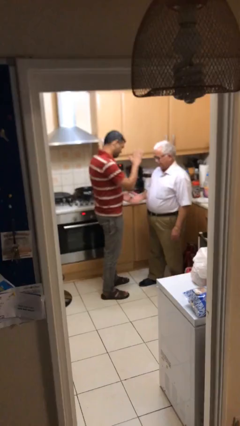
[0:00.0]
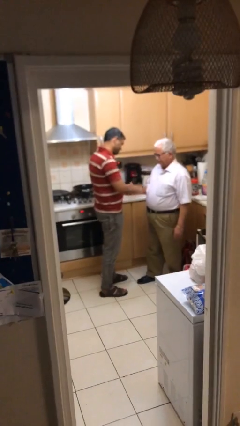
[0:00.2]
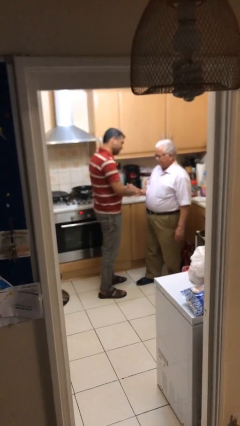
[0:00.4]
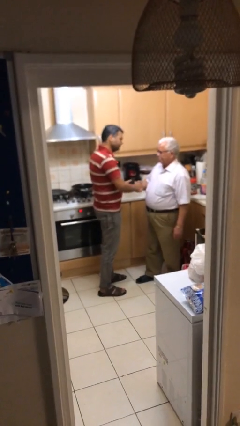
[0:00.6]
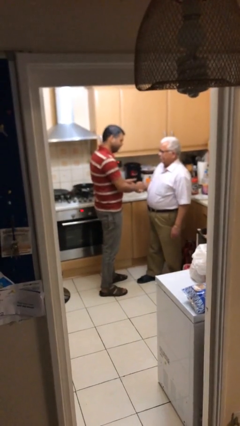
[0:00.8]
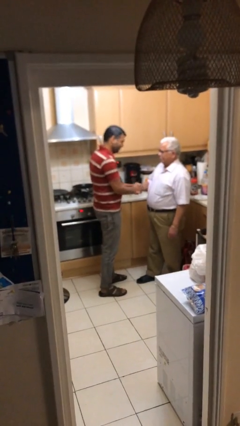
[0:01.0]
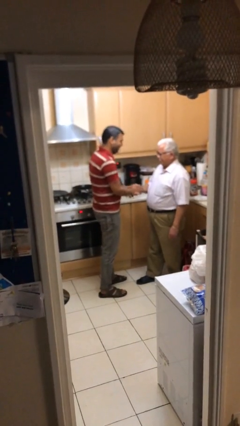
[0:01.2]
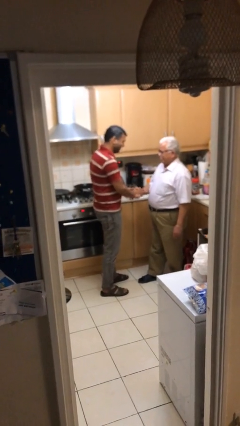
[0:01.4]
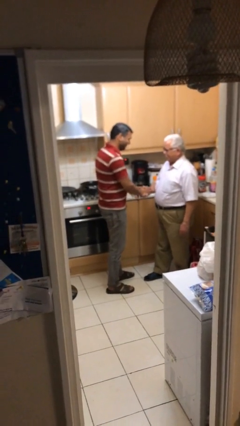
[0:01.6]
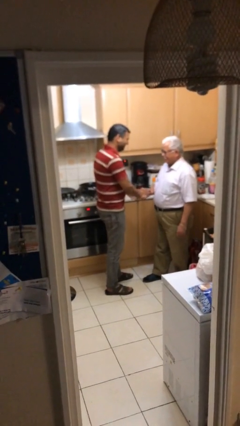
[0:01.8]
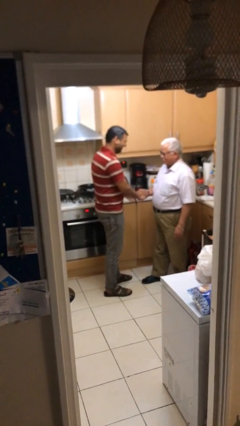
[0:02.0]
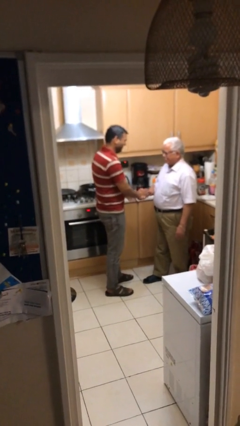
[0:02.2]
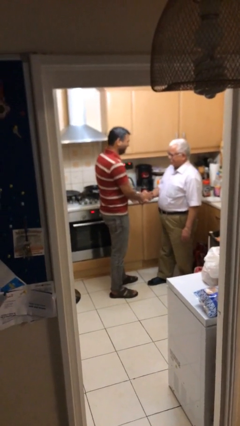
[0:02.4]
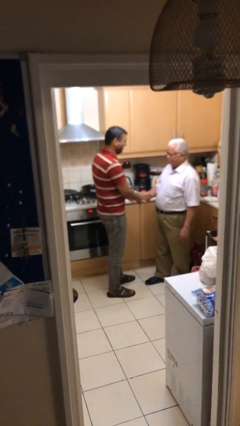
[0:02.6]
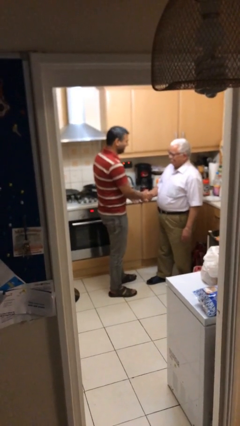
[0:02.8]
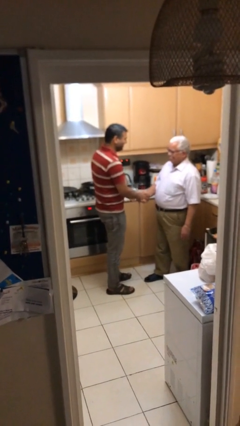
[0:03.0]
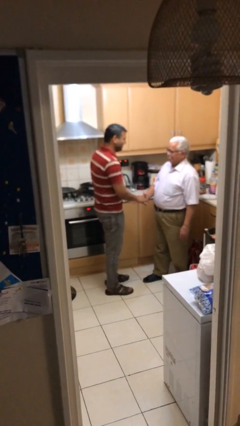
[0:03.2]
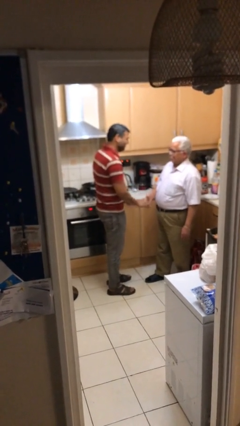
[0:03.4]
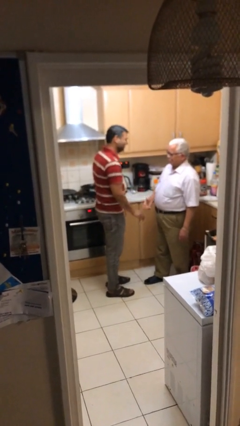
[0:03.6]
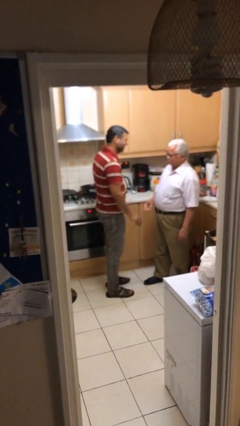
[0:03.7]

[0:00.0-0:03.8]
person highfives hand

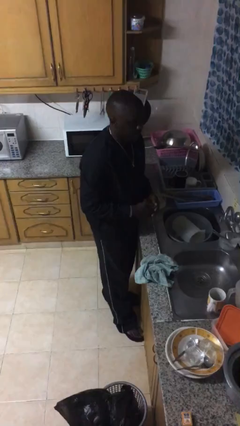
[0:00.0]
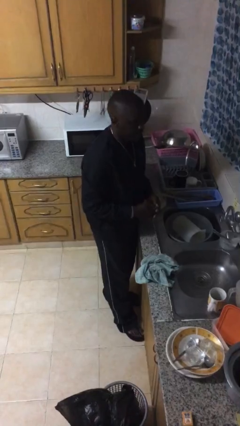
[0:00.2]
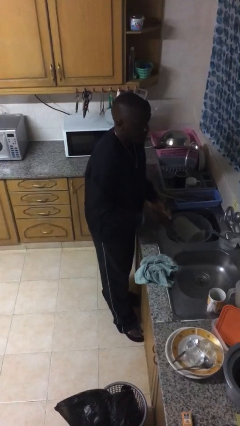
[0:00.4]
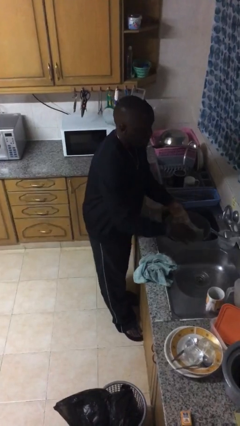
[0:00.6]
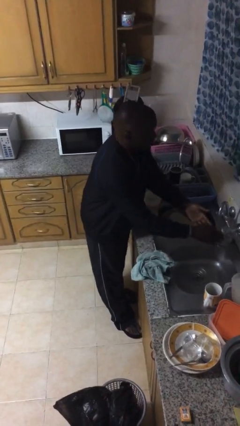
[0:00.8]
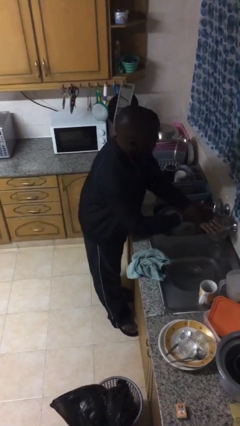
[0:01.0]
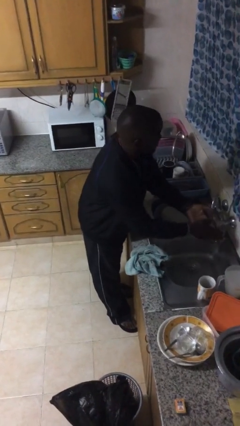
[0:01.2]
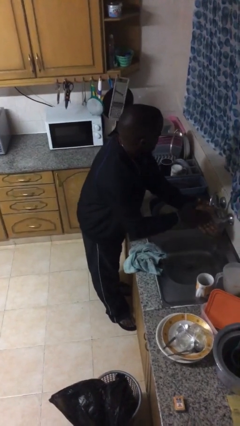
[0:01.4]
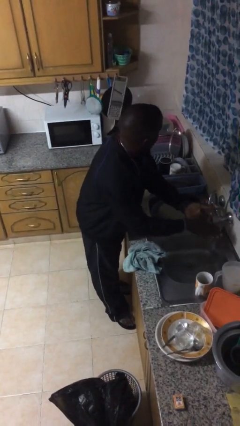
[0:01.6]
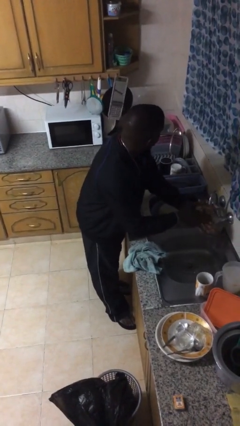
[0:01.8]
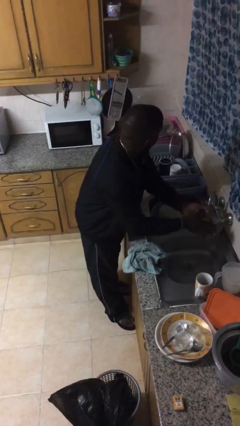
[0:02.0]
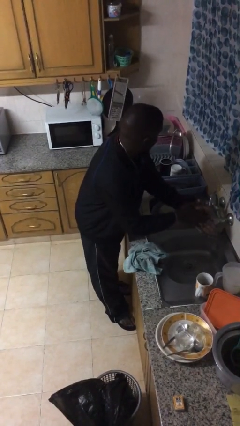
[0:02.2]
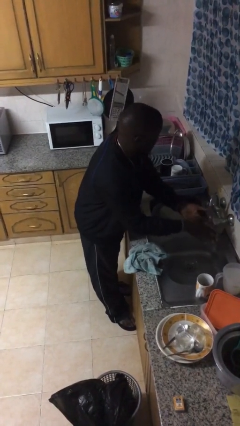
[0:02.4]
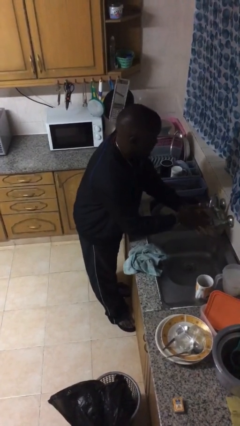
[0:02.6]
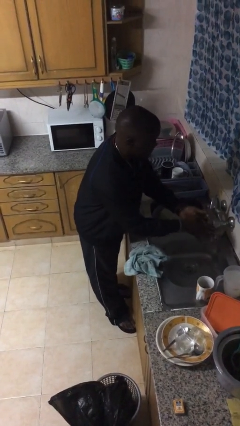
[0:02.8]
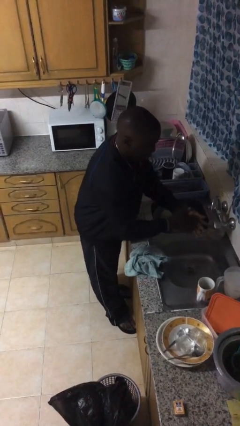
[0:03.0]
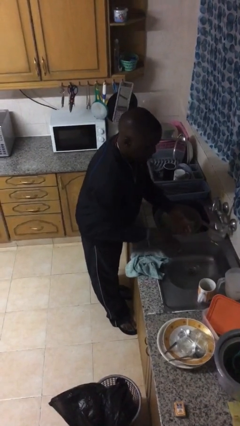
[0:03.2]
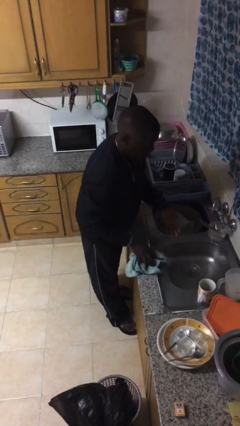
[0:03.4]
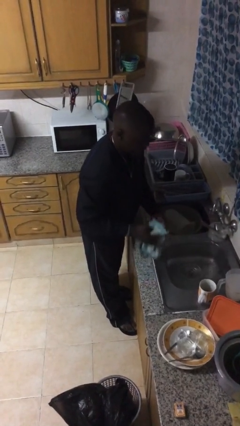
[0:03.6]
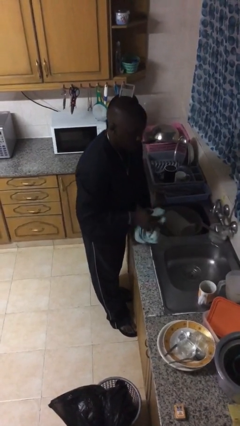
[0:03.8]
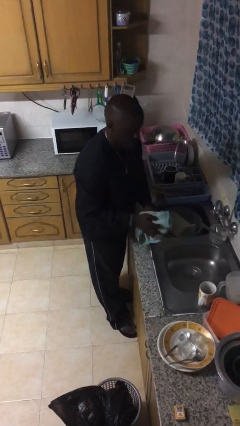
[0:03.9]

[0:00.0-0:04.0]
person washes hands

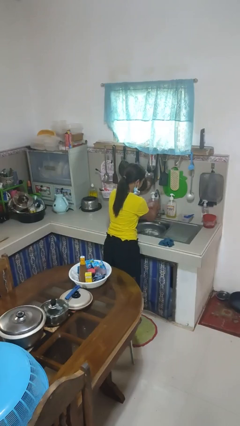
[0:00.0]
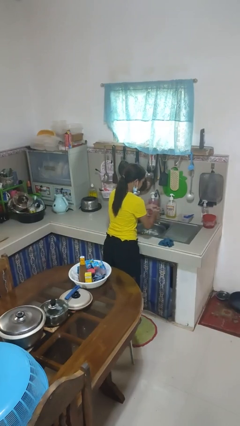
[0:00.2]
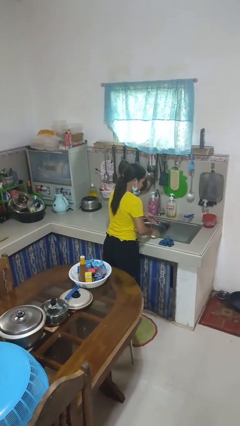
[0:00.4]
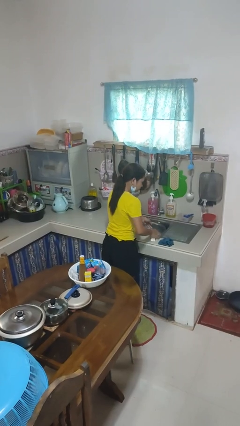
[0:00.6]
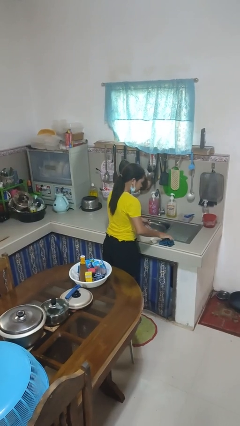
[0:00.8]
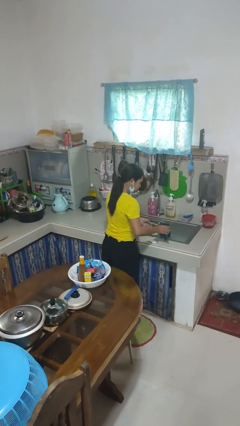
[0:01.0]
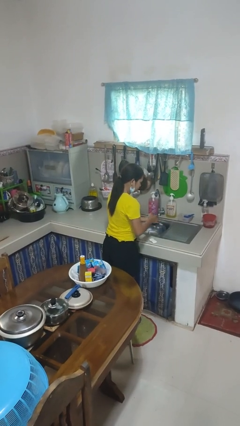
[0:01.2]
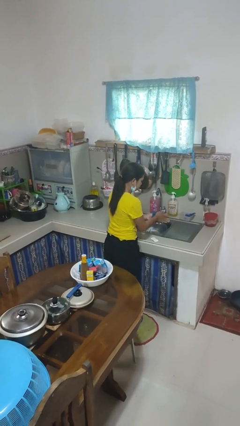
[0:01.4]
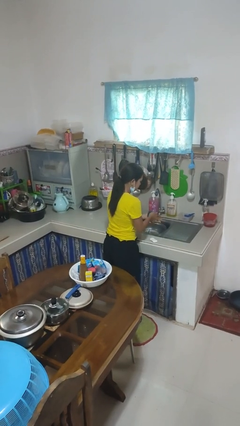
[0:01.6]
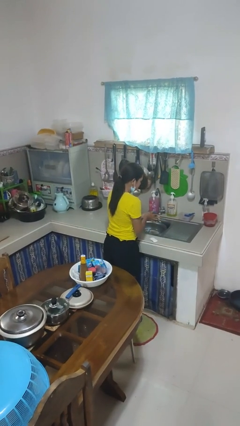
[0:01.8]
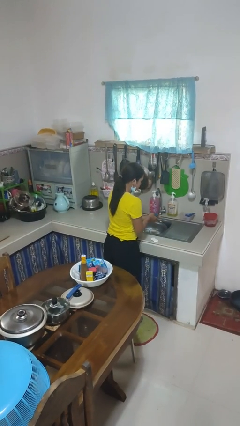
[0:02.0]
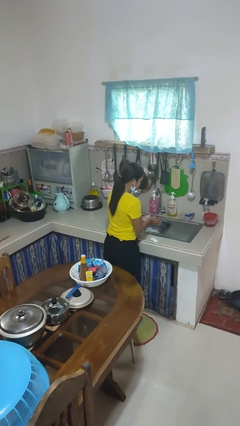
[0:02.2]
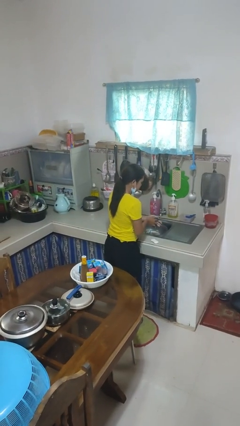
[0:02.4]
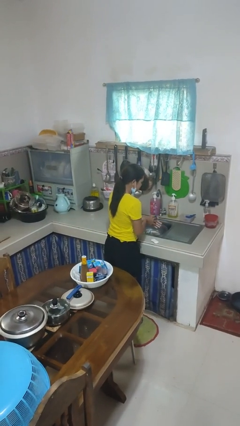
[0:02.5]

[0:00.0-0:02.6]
person dries hands with towel

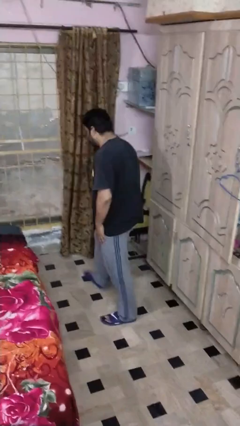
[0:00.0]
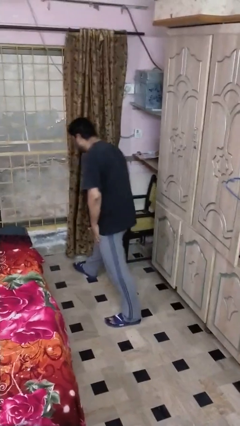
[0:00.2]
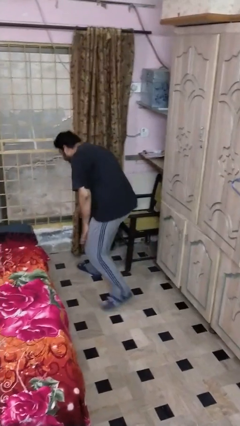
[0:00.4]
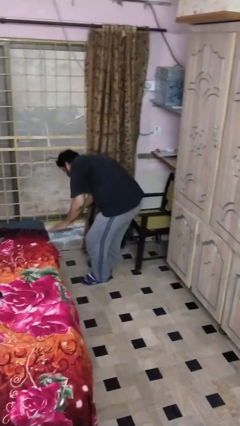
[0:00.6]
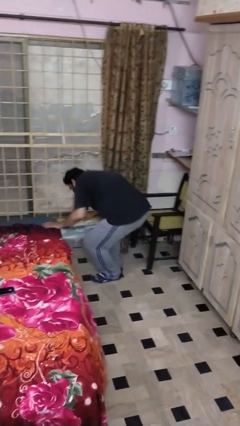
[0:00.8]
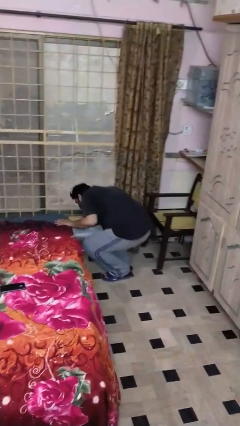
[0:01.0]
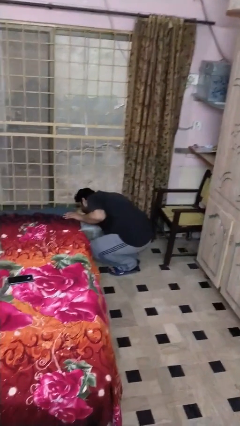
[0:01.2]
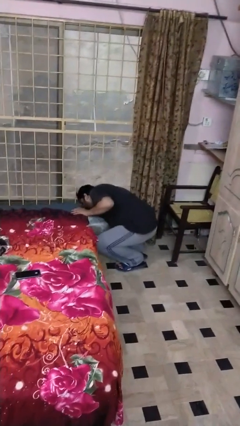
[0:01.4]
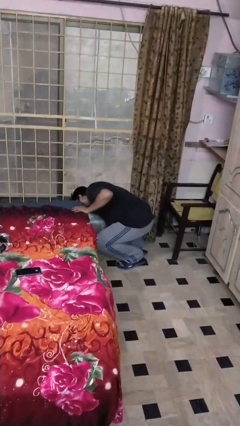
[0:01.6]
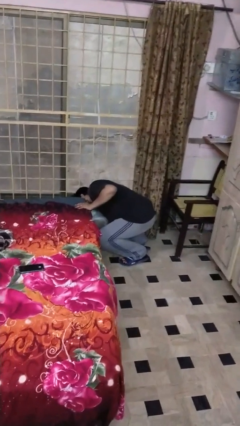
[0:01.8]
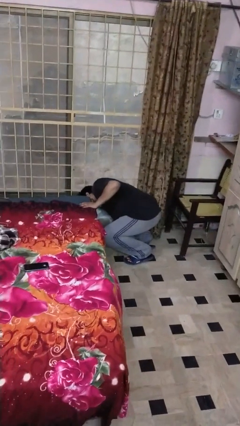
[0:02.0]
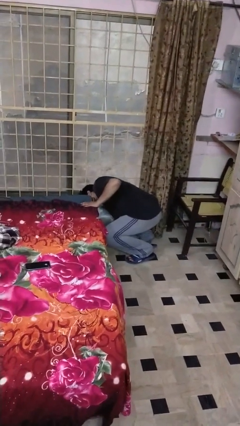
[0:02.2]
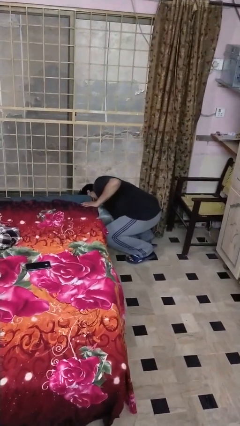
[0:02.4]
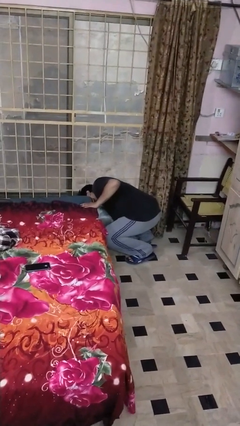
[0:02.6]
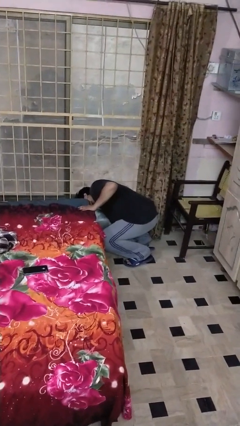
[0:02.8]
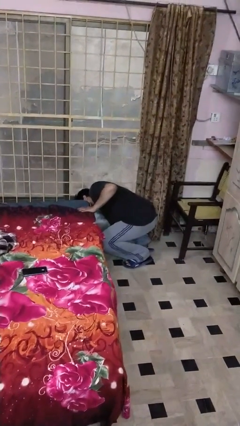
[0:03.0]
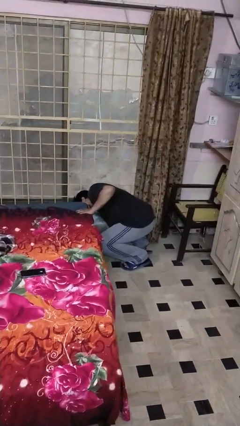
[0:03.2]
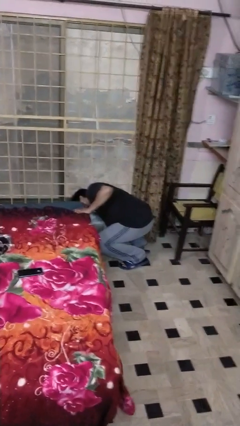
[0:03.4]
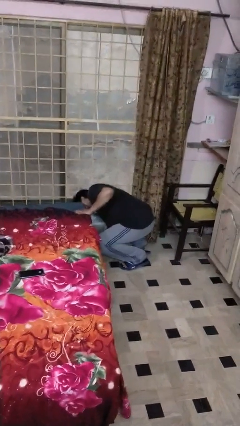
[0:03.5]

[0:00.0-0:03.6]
person searches under bed

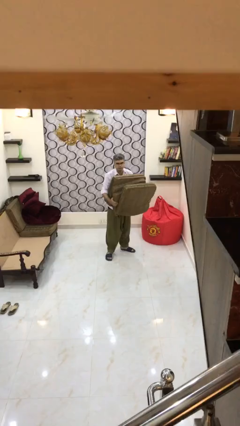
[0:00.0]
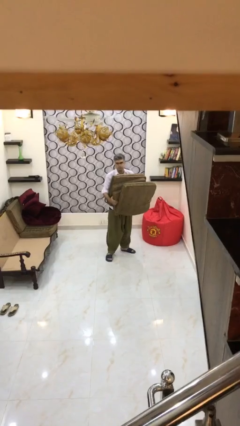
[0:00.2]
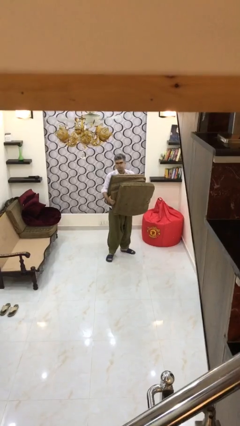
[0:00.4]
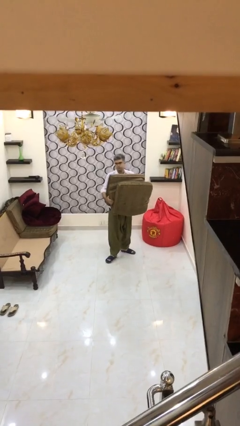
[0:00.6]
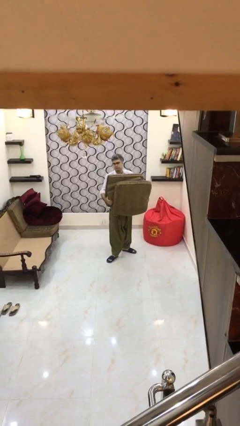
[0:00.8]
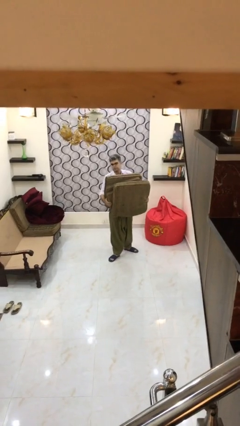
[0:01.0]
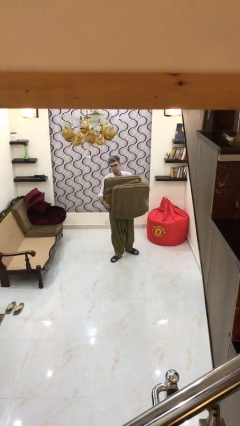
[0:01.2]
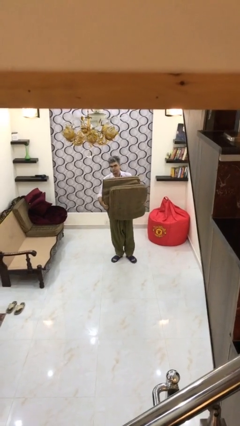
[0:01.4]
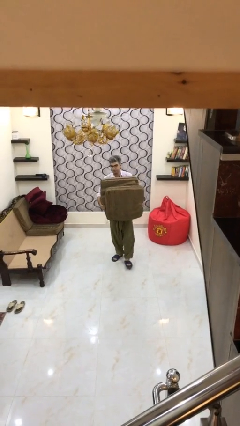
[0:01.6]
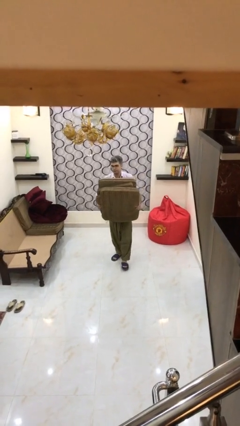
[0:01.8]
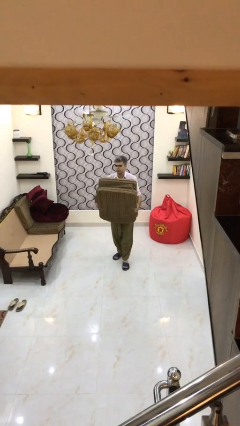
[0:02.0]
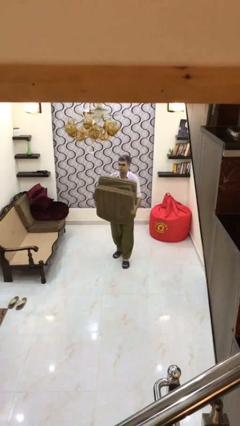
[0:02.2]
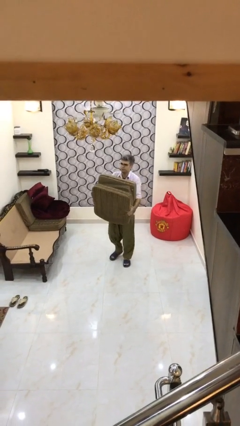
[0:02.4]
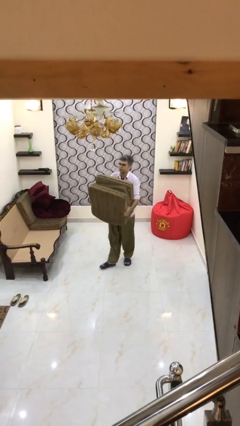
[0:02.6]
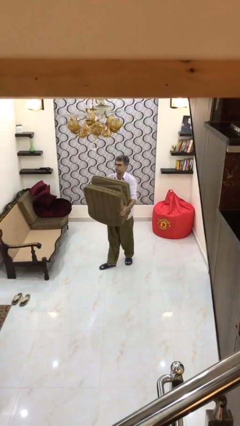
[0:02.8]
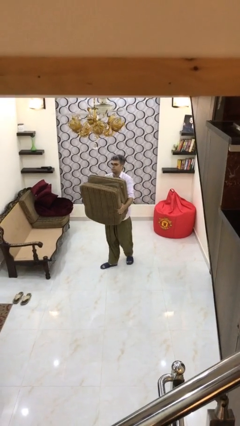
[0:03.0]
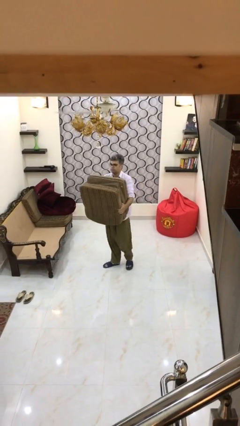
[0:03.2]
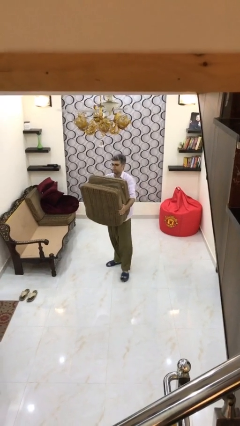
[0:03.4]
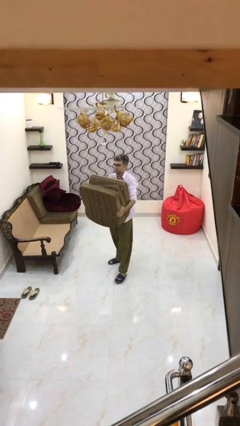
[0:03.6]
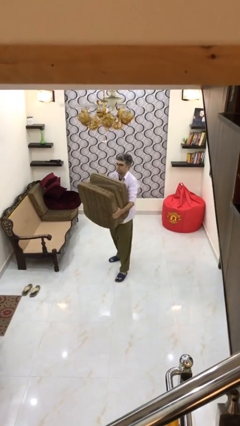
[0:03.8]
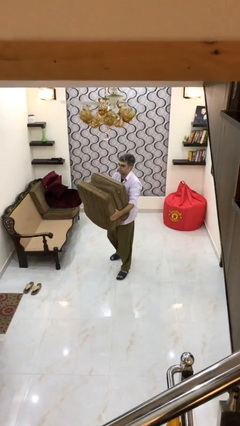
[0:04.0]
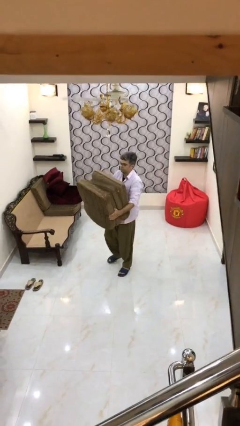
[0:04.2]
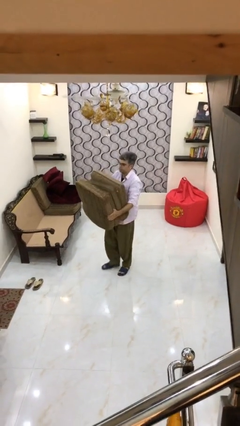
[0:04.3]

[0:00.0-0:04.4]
person carries heavy object
